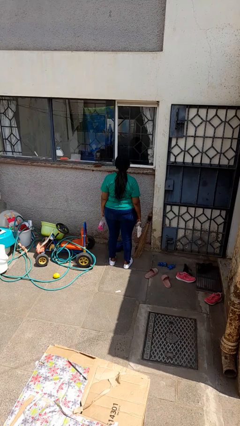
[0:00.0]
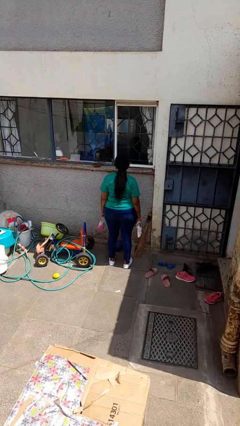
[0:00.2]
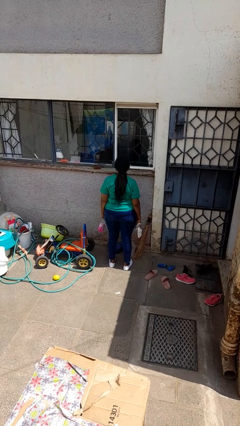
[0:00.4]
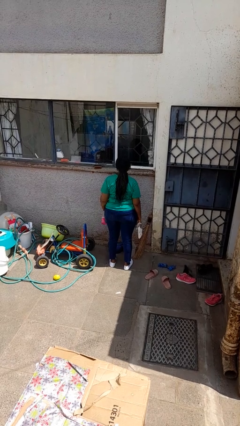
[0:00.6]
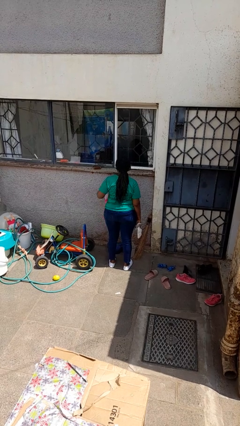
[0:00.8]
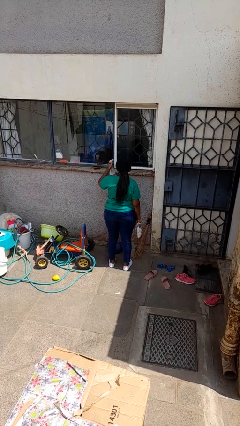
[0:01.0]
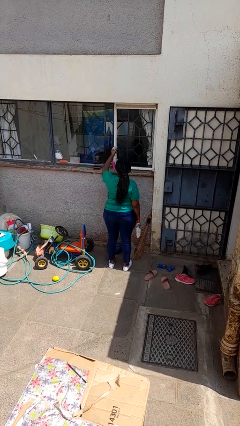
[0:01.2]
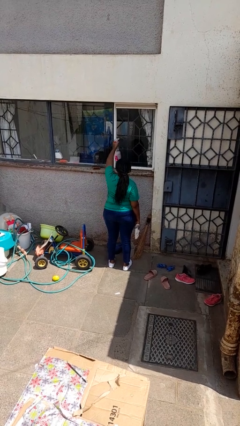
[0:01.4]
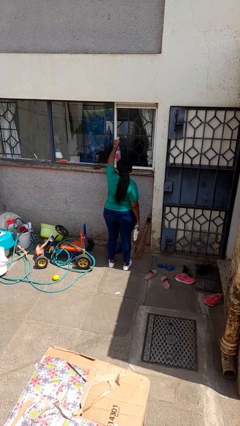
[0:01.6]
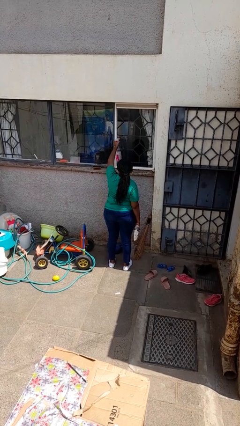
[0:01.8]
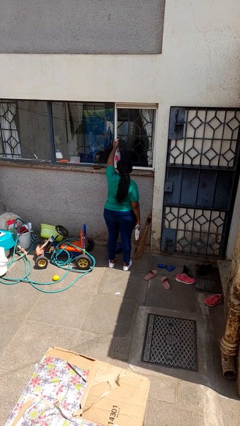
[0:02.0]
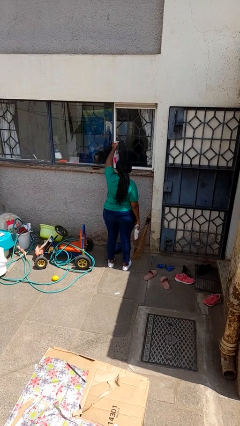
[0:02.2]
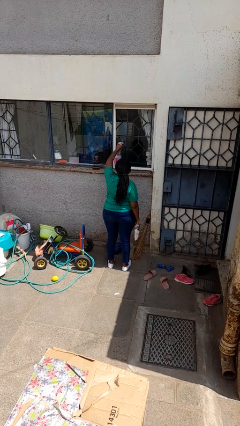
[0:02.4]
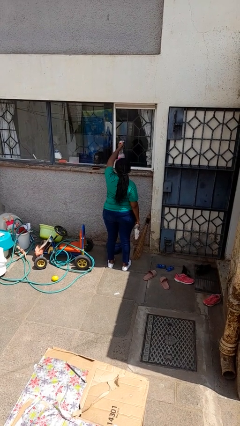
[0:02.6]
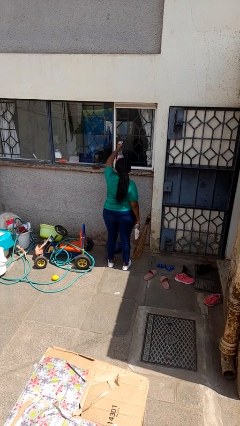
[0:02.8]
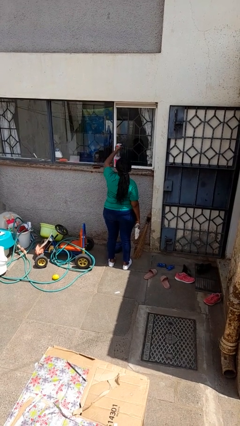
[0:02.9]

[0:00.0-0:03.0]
person sprays from bottle

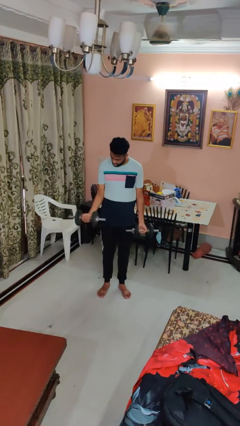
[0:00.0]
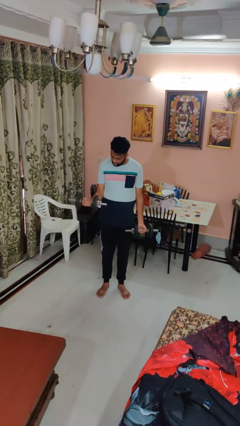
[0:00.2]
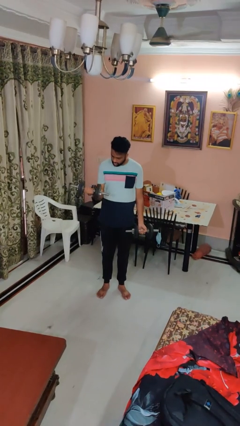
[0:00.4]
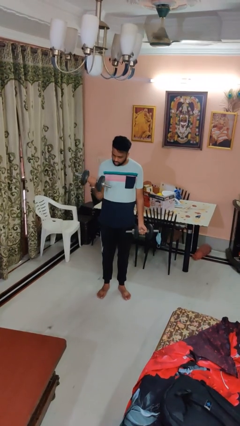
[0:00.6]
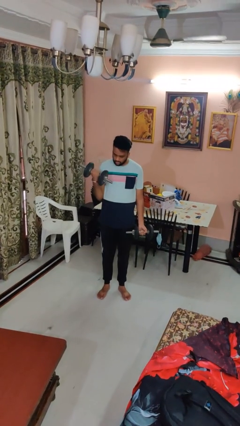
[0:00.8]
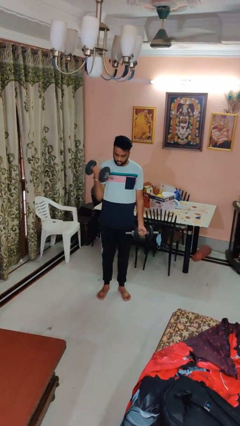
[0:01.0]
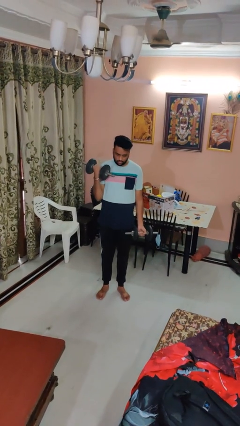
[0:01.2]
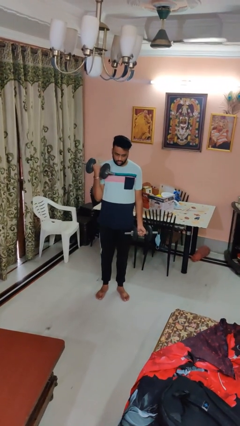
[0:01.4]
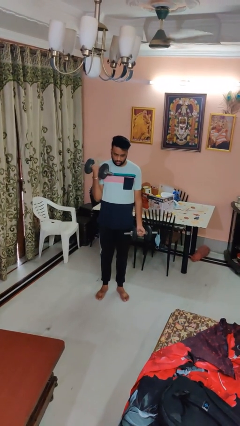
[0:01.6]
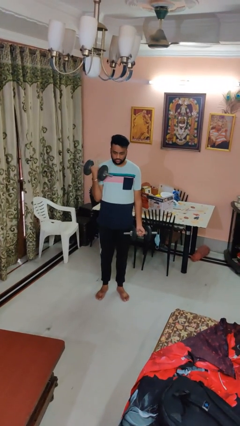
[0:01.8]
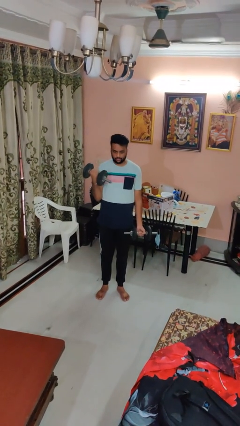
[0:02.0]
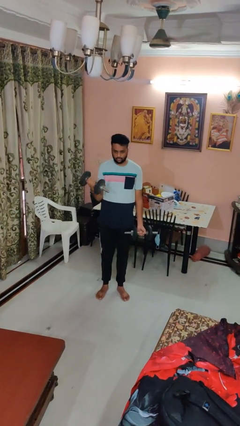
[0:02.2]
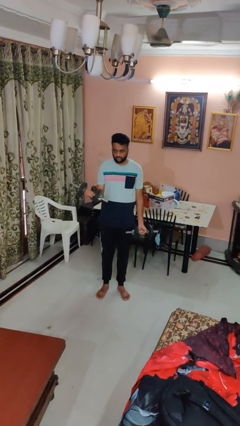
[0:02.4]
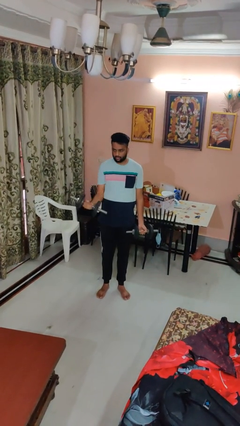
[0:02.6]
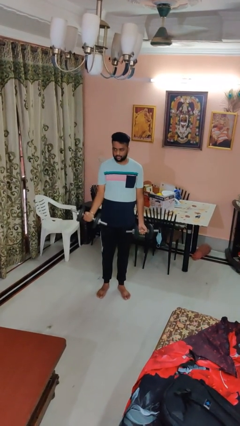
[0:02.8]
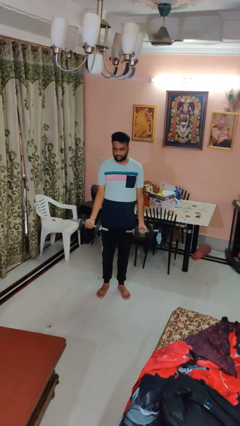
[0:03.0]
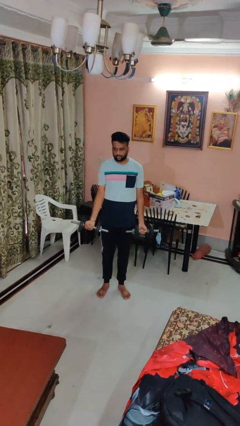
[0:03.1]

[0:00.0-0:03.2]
person lifts dumbbells

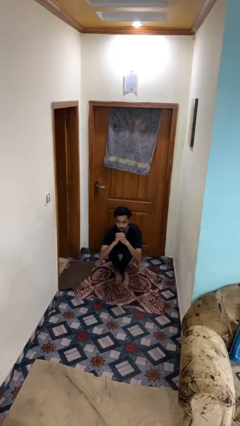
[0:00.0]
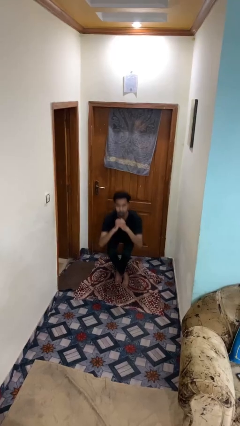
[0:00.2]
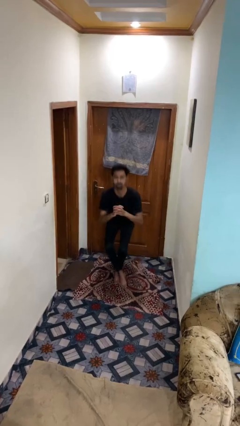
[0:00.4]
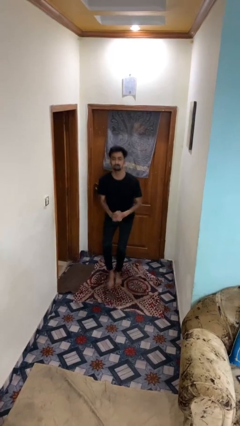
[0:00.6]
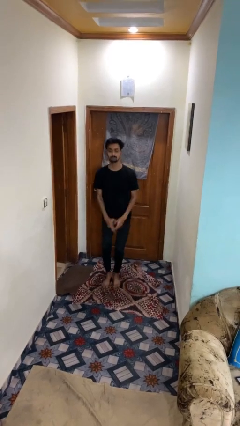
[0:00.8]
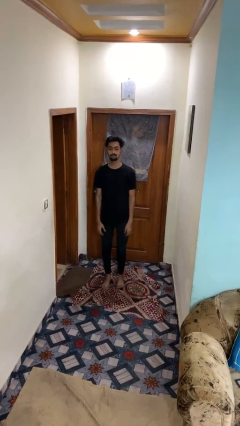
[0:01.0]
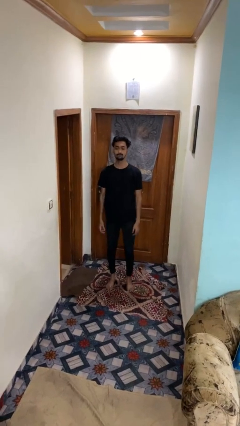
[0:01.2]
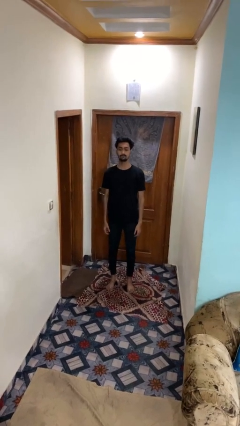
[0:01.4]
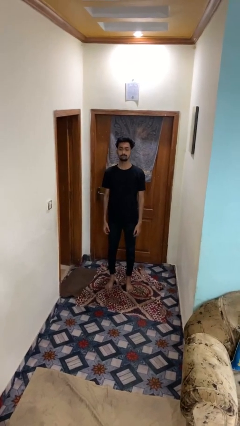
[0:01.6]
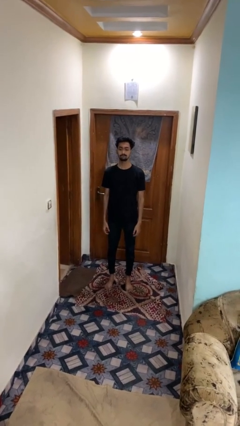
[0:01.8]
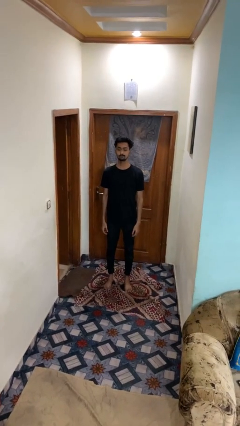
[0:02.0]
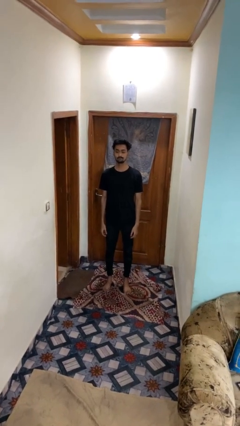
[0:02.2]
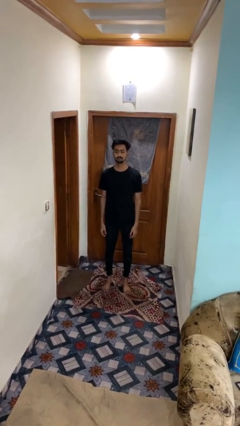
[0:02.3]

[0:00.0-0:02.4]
person stands up from floor

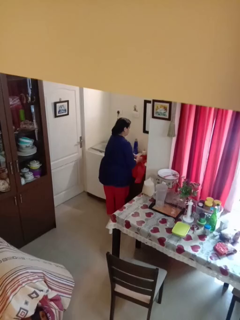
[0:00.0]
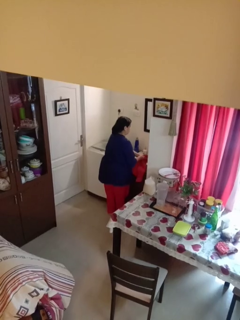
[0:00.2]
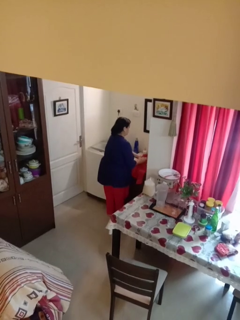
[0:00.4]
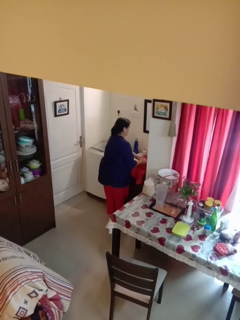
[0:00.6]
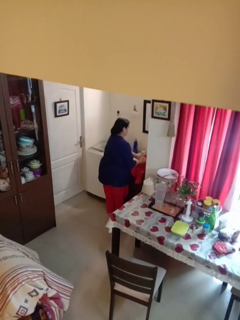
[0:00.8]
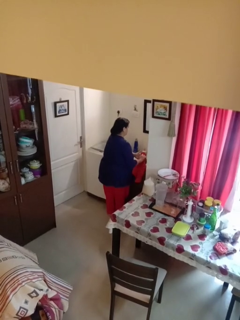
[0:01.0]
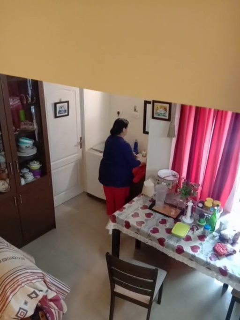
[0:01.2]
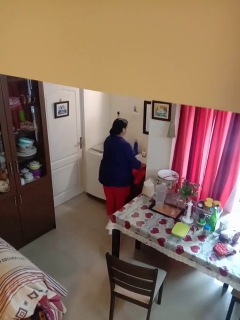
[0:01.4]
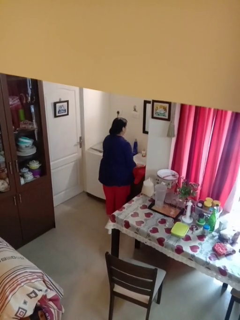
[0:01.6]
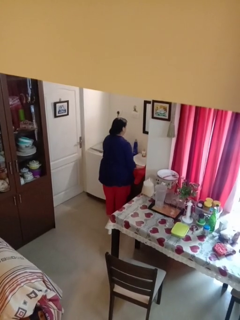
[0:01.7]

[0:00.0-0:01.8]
person dries hands with towel

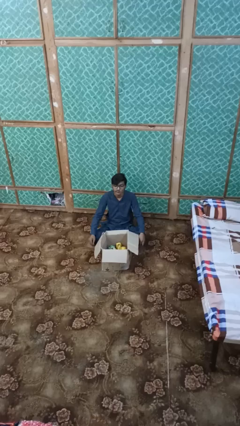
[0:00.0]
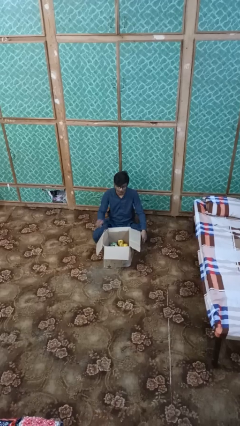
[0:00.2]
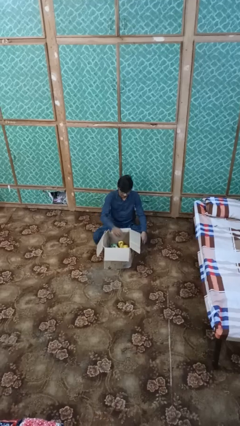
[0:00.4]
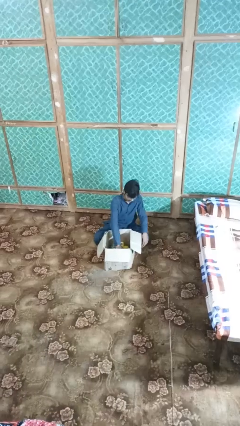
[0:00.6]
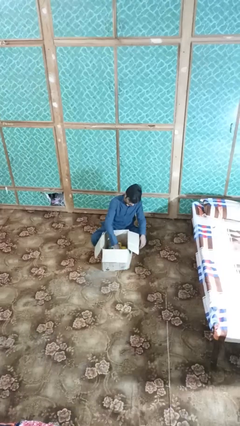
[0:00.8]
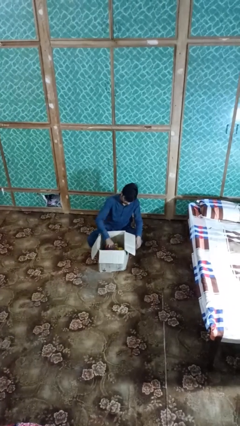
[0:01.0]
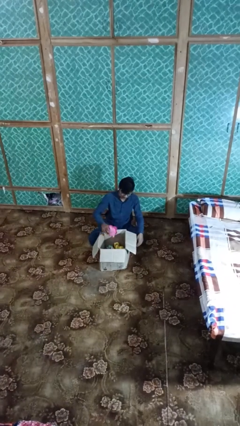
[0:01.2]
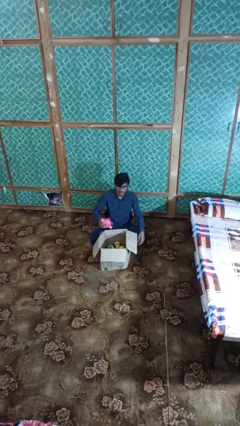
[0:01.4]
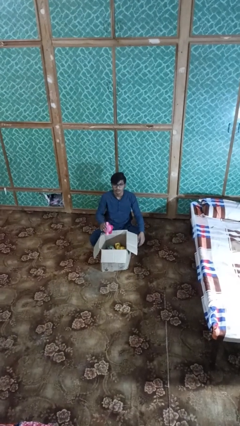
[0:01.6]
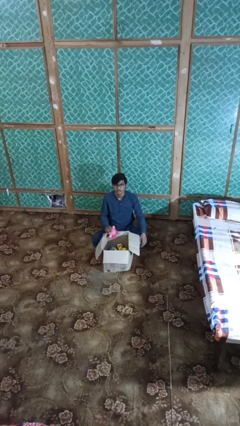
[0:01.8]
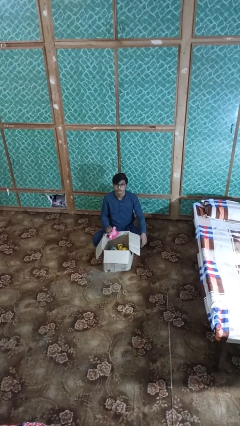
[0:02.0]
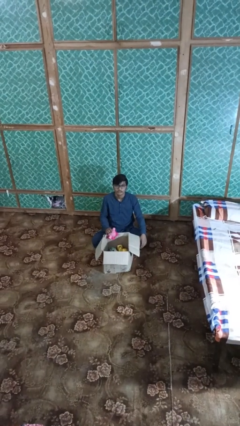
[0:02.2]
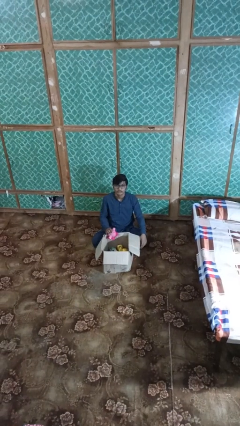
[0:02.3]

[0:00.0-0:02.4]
person takes object from box

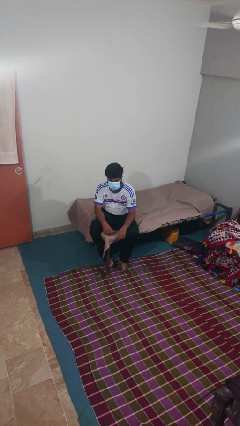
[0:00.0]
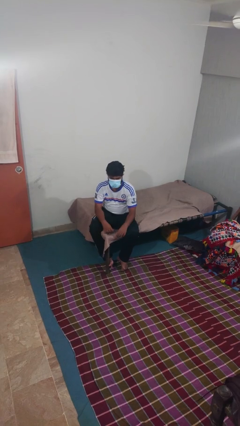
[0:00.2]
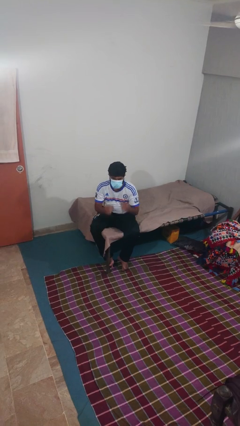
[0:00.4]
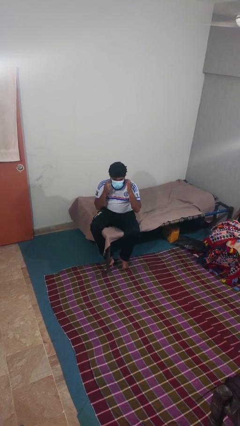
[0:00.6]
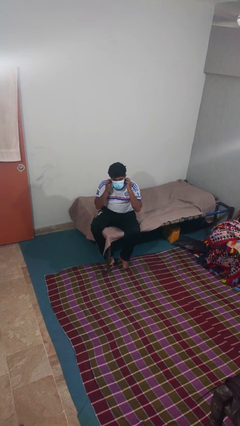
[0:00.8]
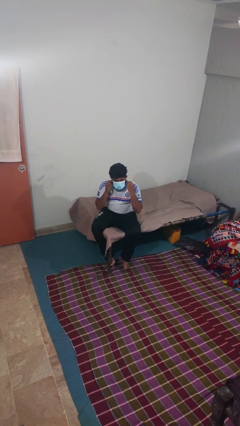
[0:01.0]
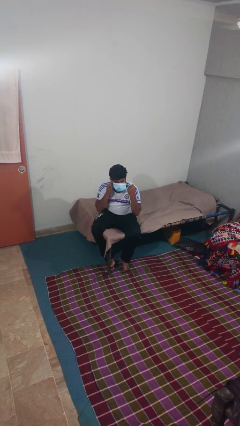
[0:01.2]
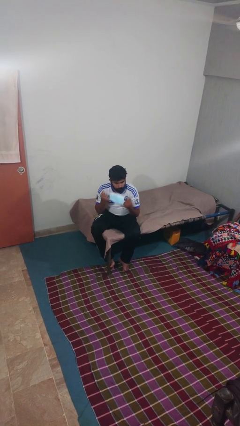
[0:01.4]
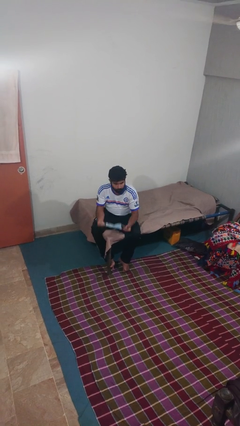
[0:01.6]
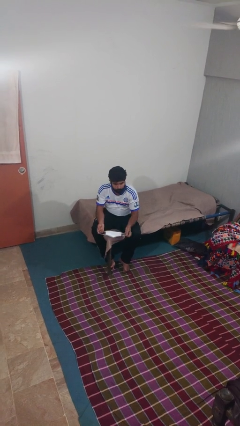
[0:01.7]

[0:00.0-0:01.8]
person takes off facemask

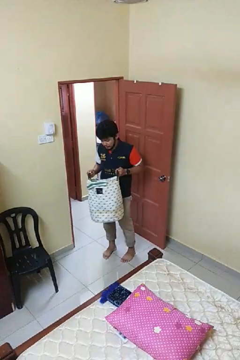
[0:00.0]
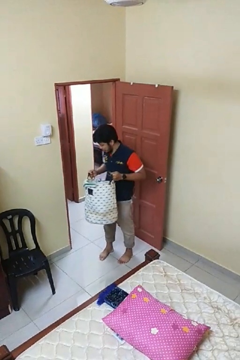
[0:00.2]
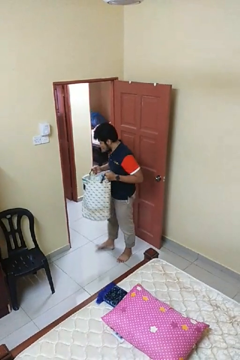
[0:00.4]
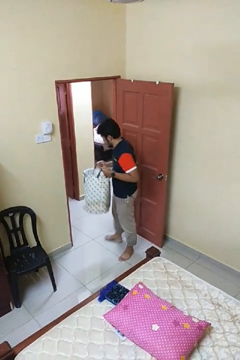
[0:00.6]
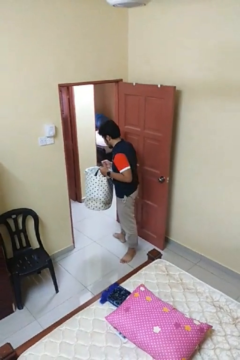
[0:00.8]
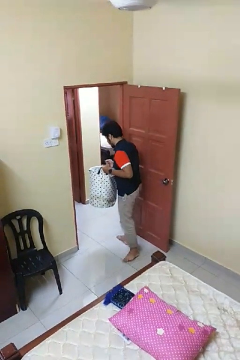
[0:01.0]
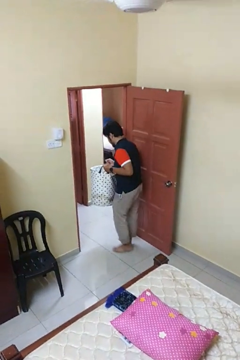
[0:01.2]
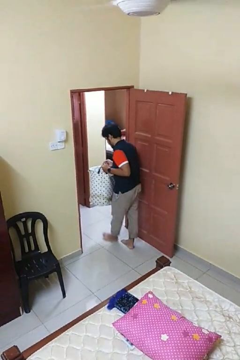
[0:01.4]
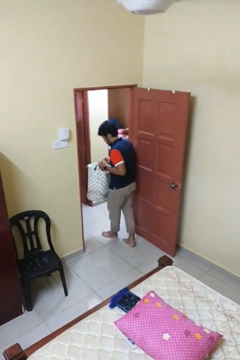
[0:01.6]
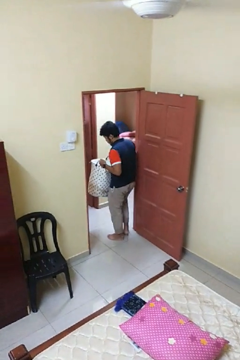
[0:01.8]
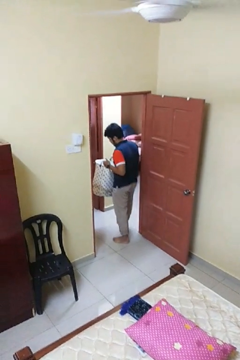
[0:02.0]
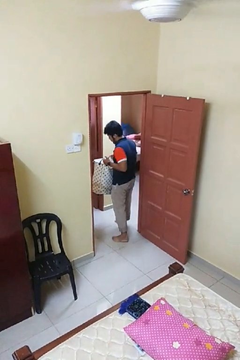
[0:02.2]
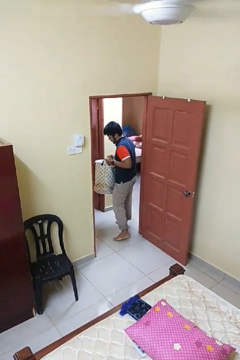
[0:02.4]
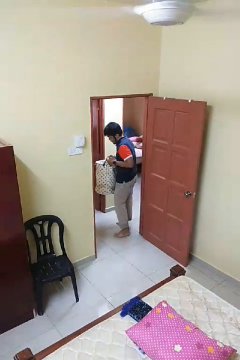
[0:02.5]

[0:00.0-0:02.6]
person carries laundry basket

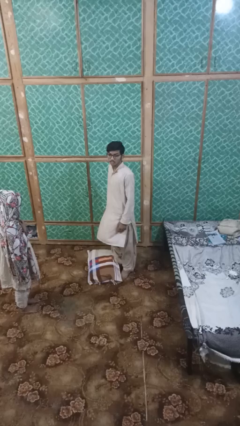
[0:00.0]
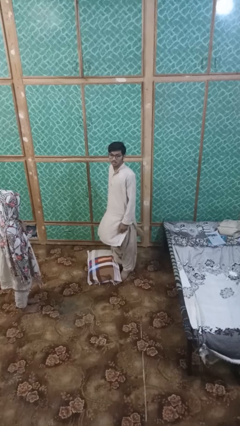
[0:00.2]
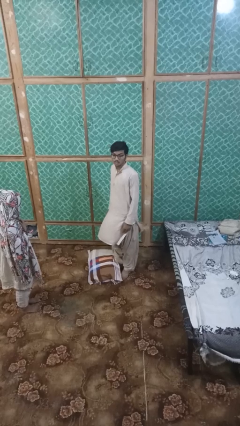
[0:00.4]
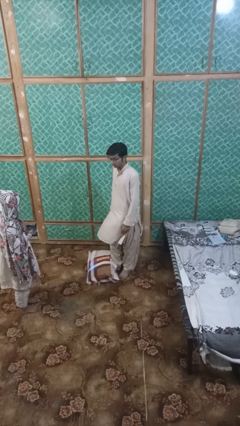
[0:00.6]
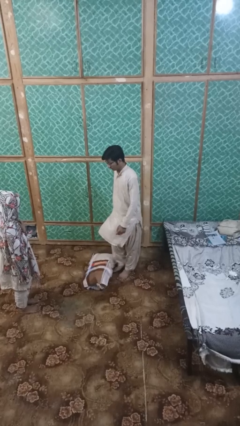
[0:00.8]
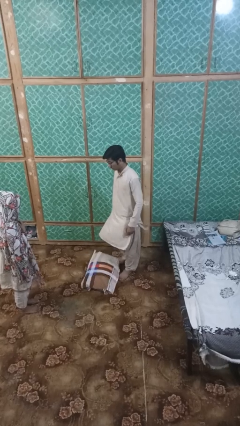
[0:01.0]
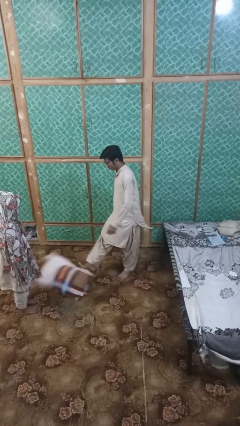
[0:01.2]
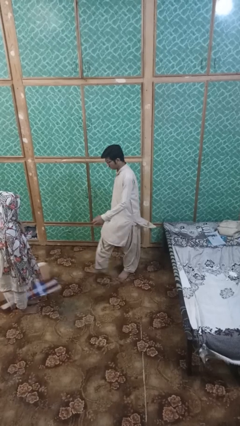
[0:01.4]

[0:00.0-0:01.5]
person kicks object to person
